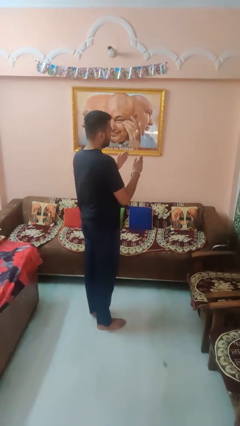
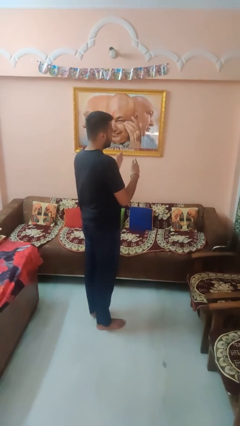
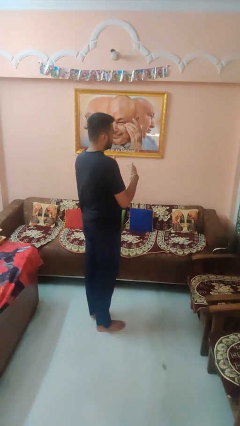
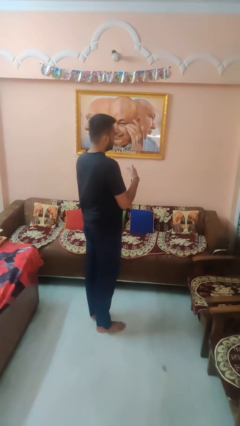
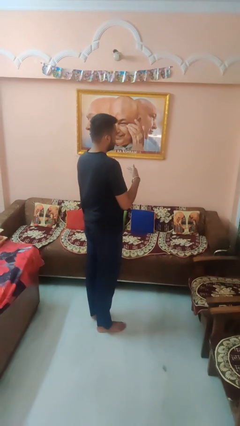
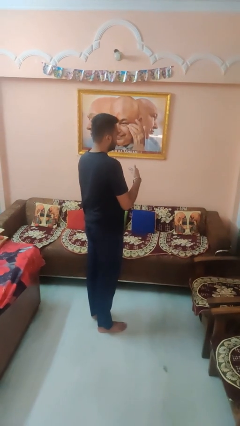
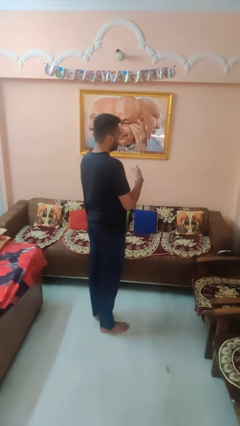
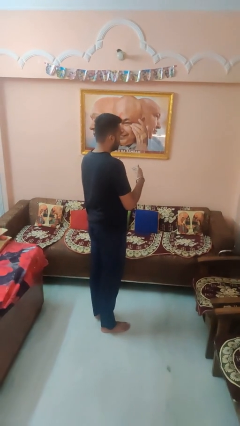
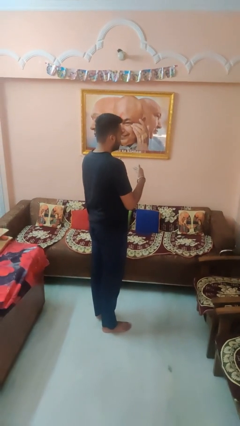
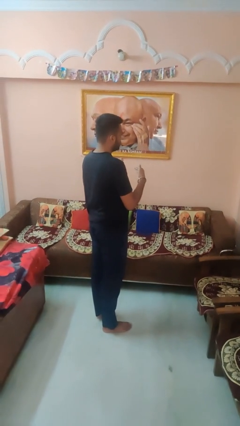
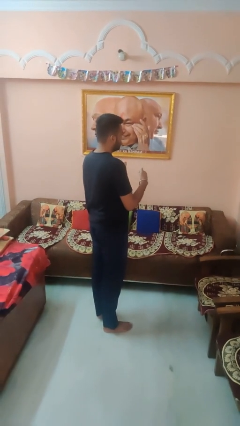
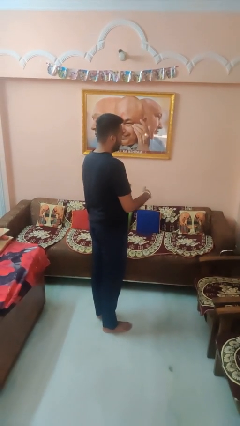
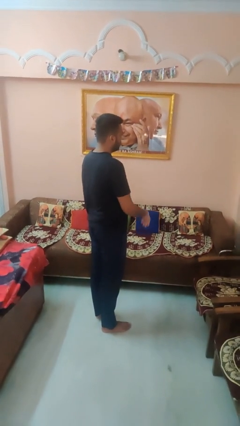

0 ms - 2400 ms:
person gestures swipe left

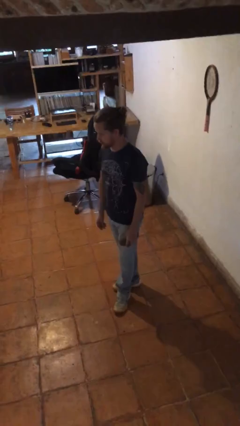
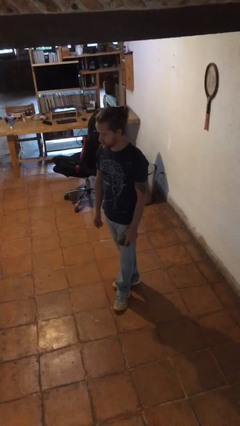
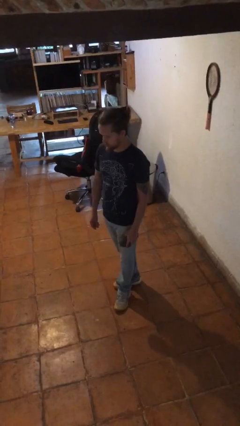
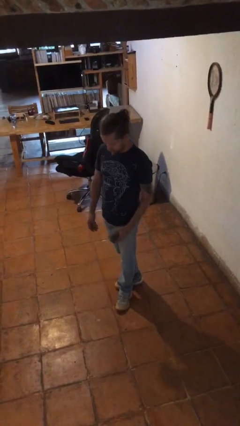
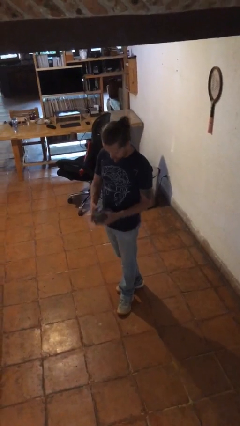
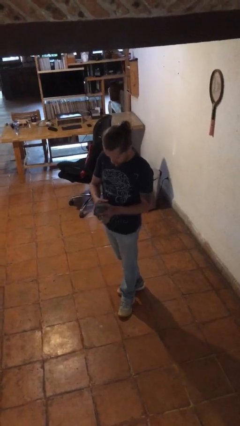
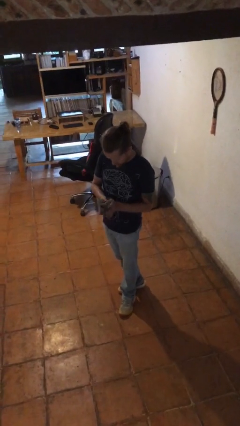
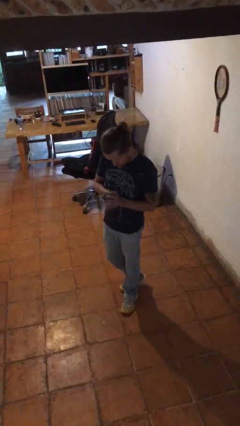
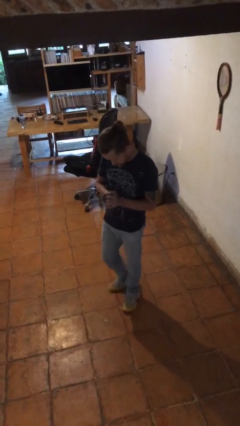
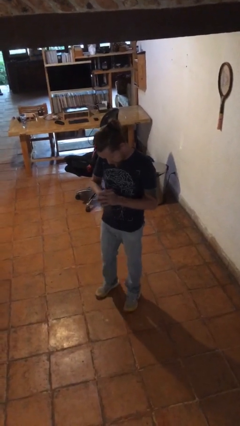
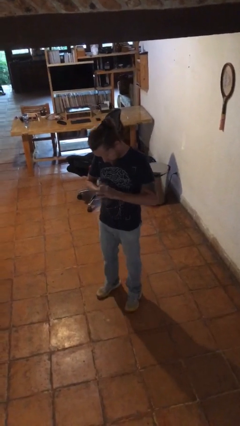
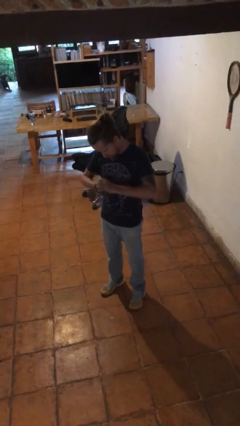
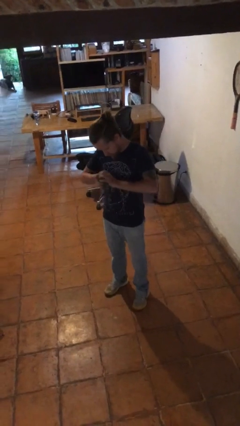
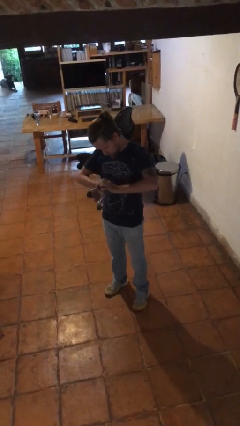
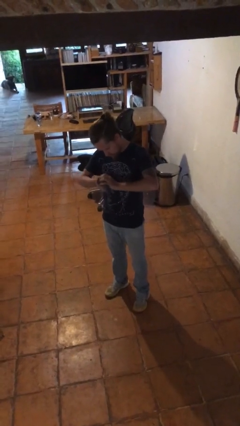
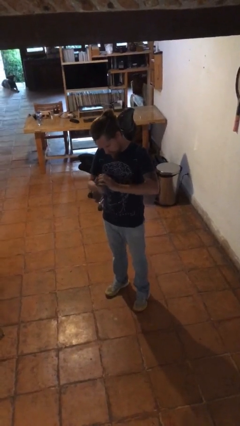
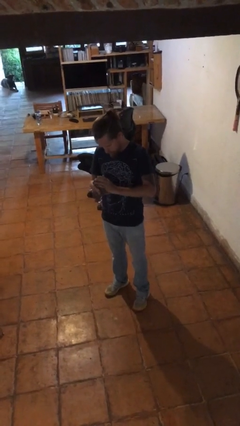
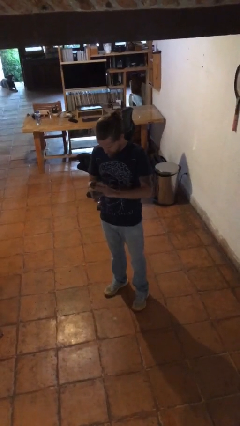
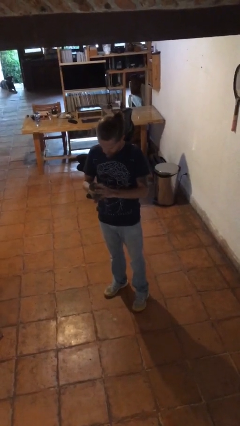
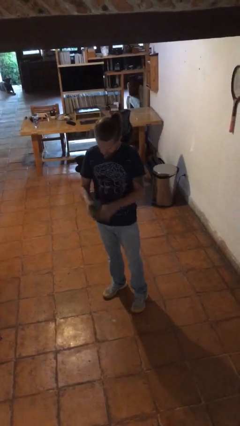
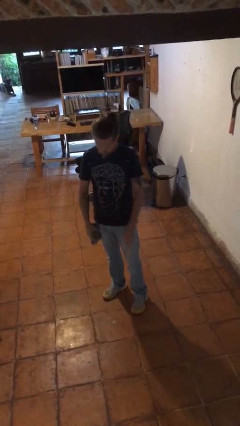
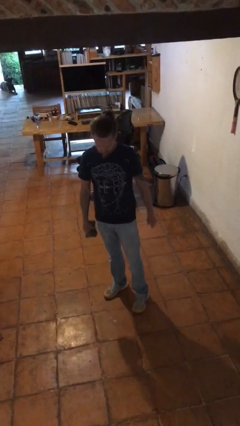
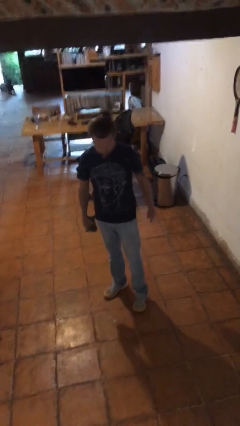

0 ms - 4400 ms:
person squeezes object

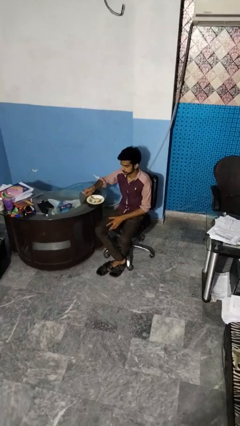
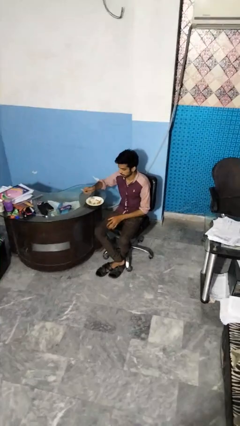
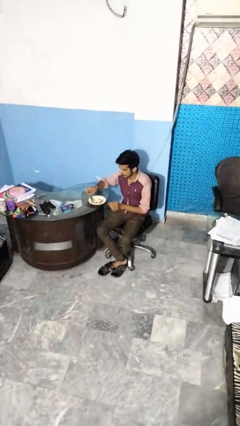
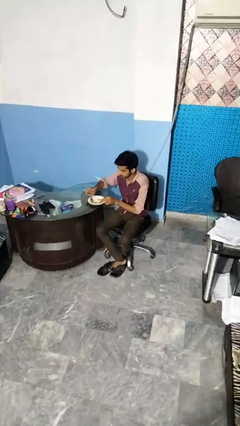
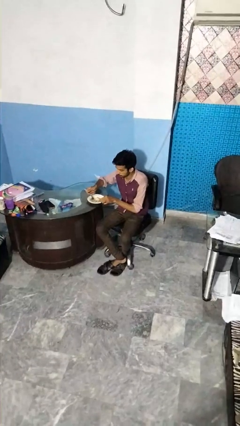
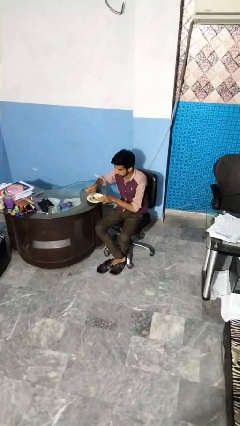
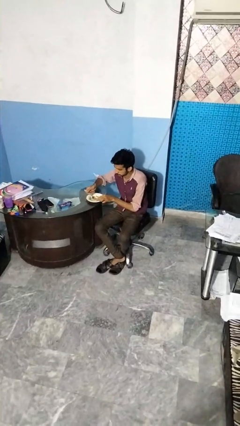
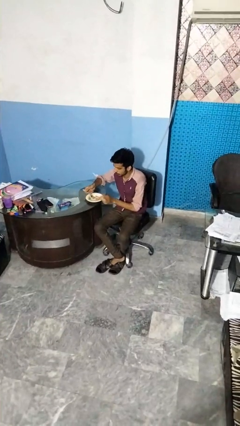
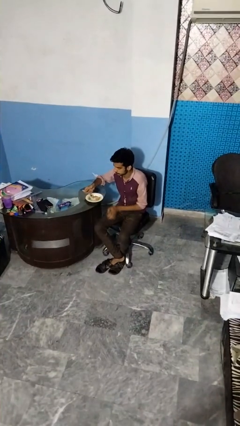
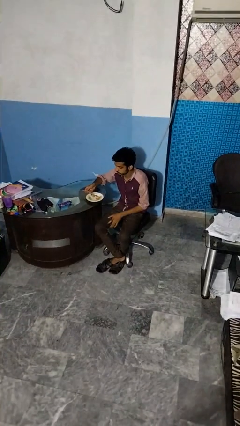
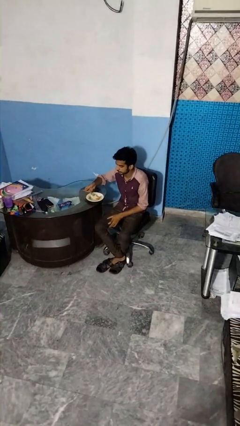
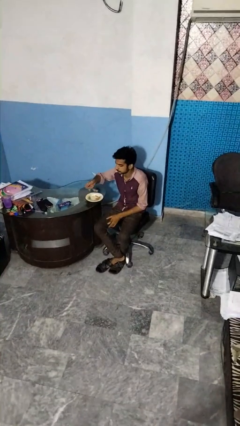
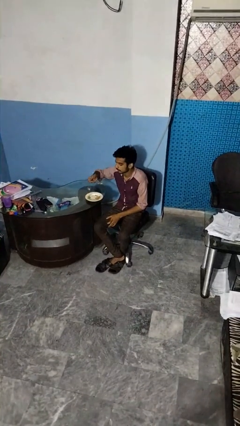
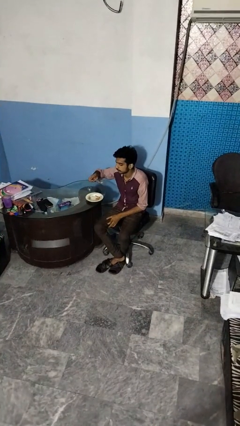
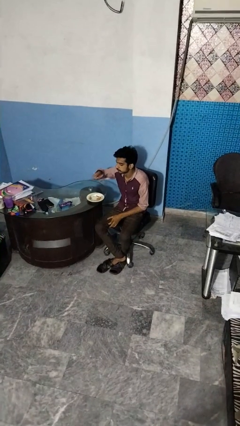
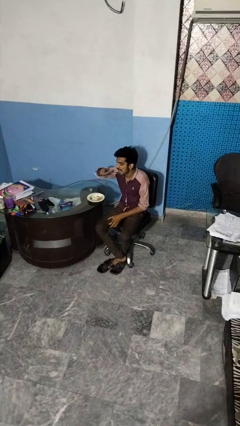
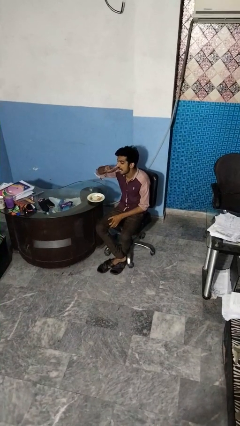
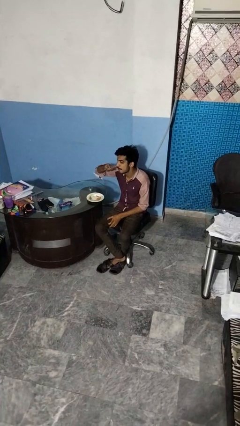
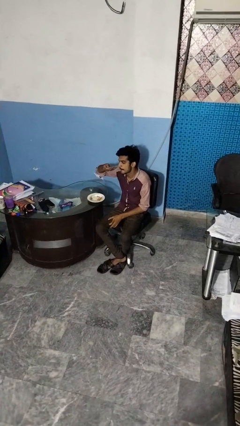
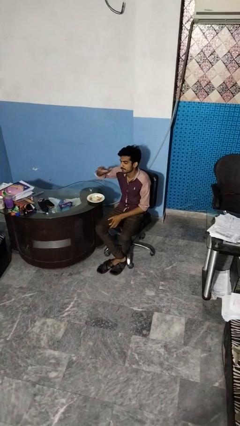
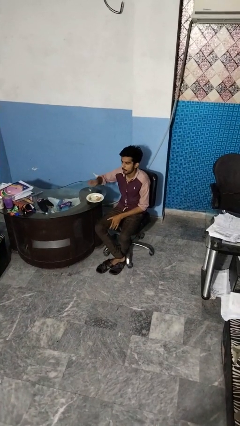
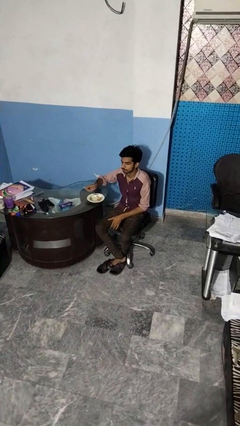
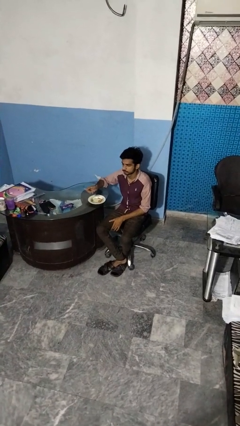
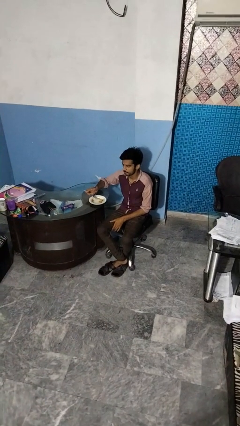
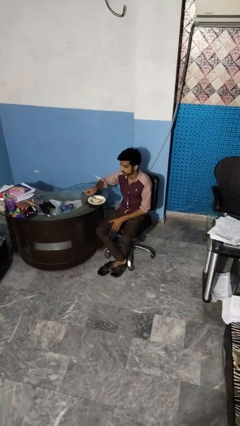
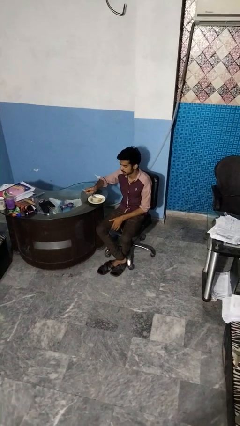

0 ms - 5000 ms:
person eats with utensil

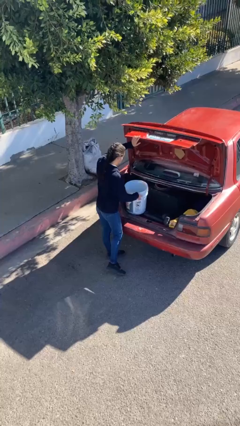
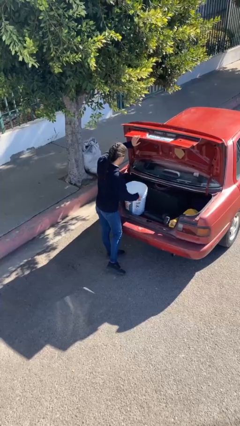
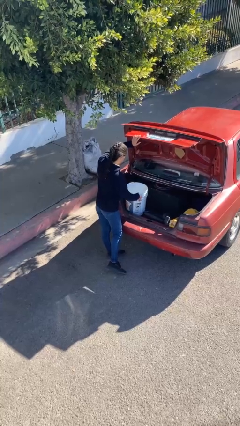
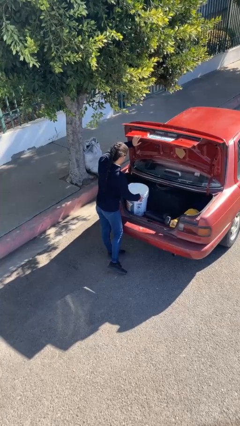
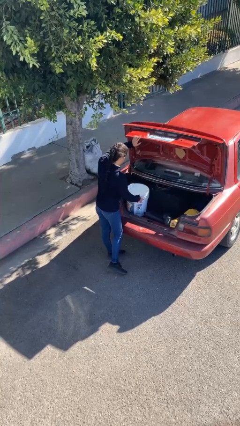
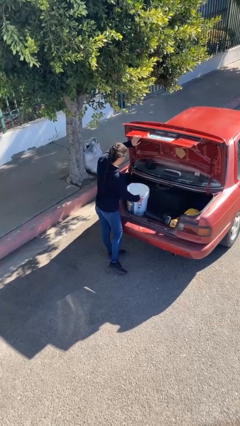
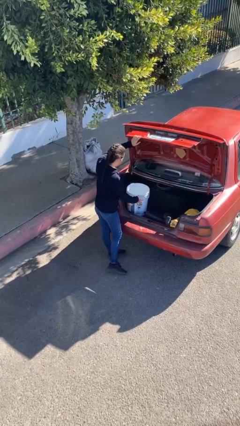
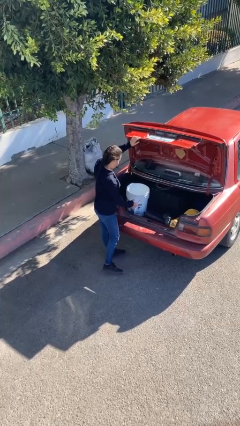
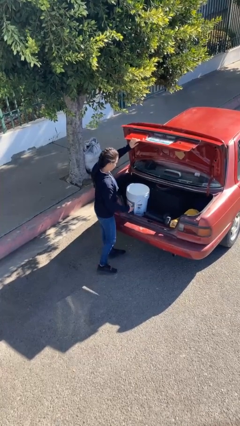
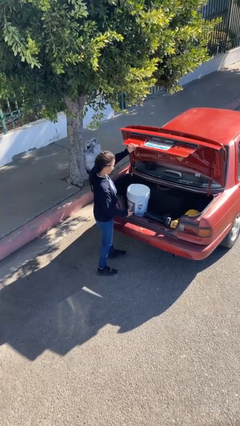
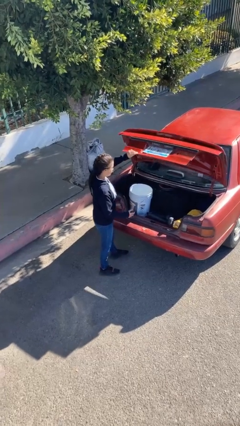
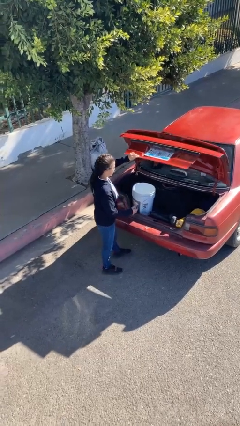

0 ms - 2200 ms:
person loads car

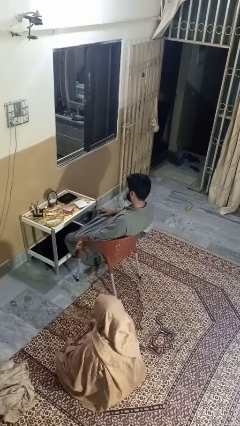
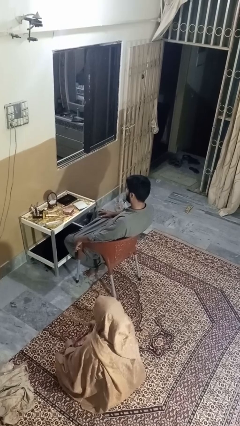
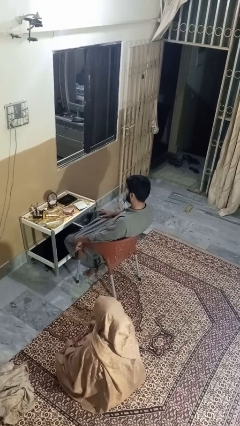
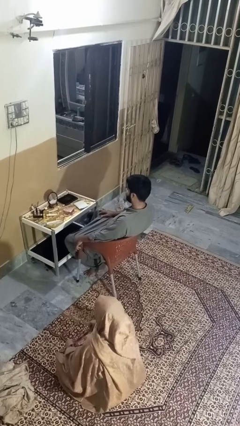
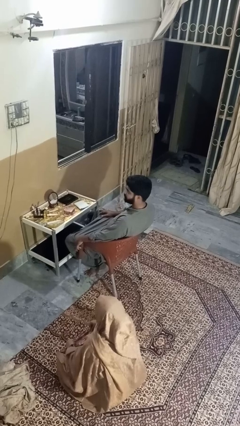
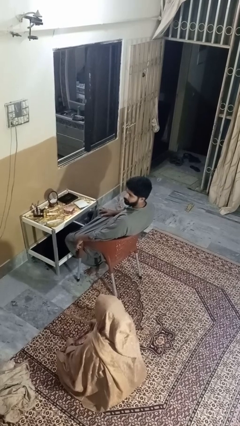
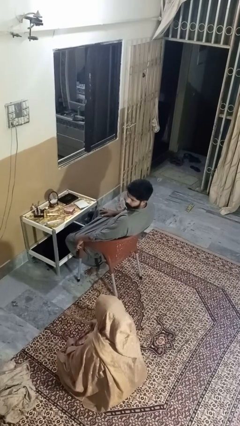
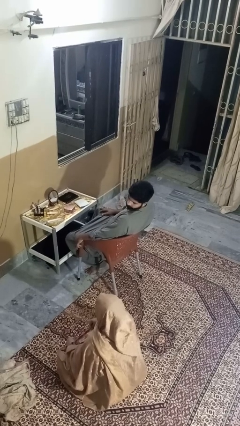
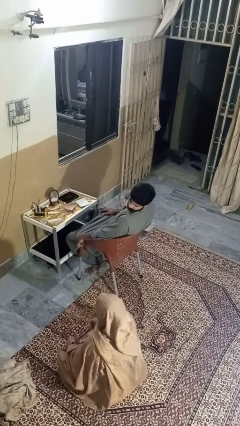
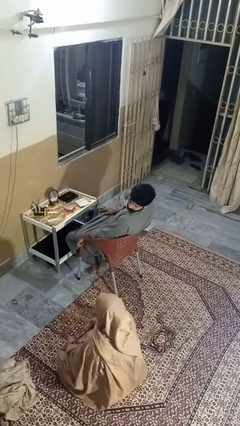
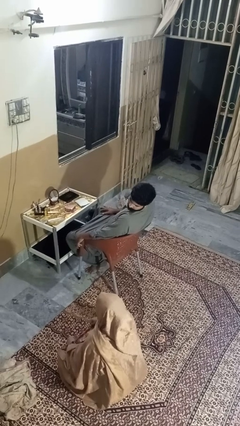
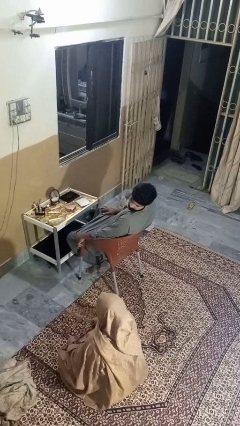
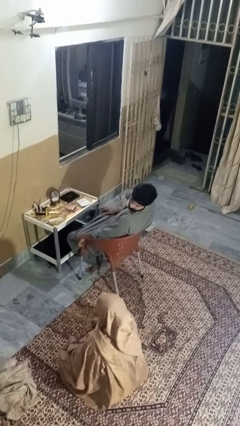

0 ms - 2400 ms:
person looks over shoulder

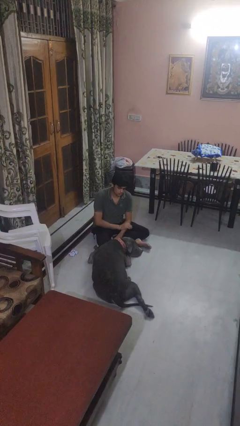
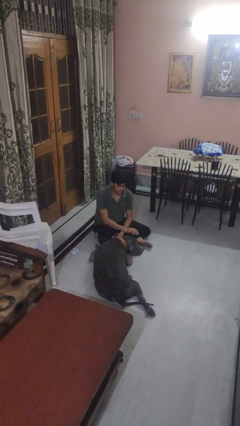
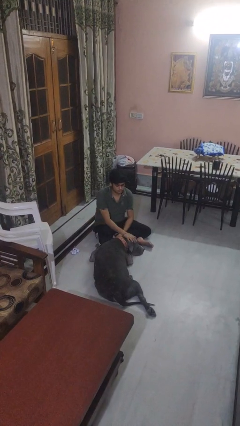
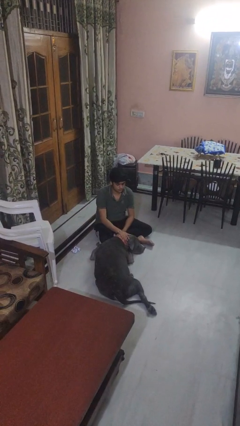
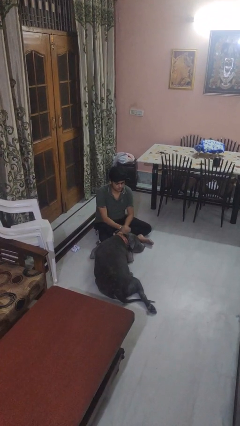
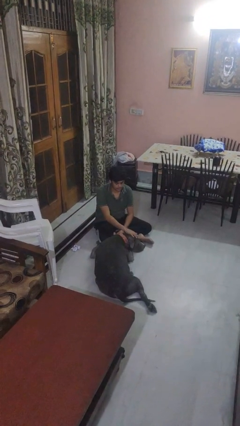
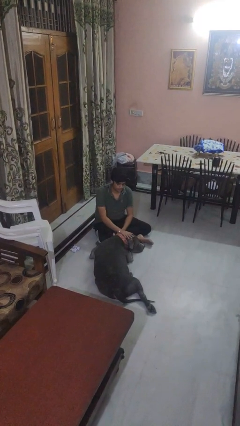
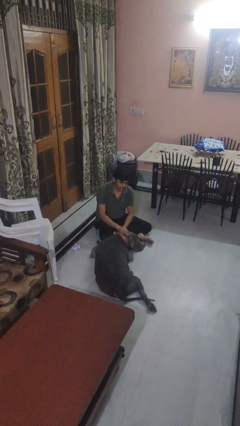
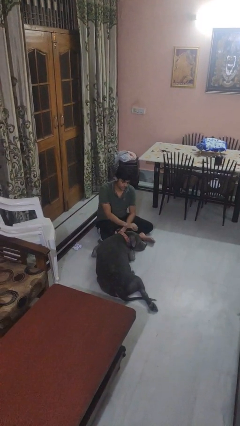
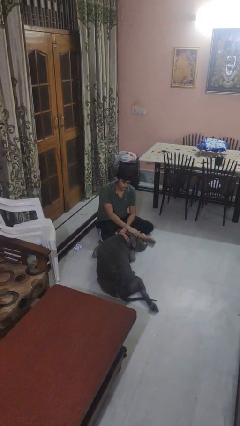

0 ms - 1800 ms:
person pets dog
